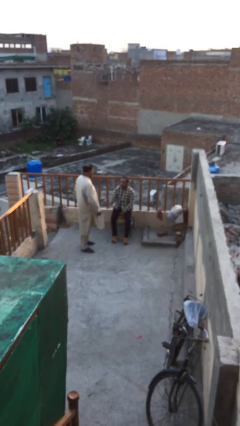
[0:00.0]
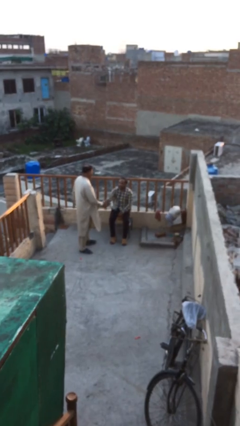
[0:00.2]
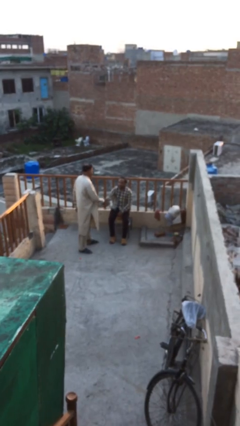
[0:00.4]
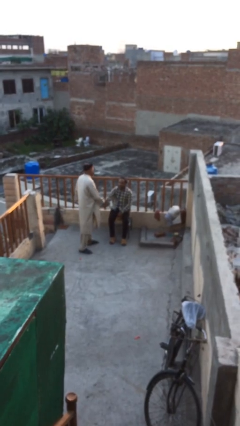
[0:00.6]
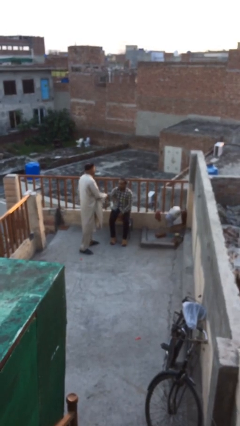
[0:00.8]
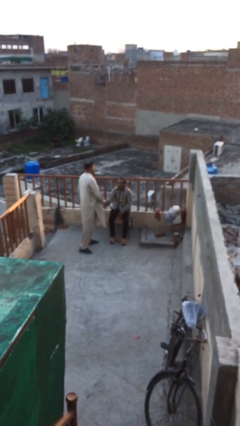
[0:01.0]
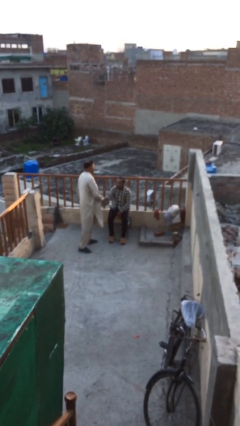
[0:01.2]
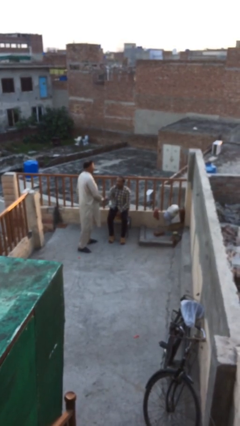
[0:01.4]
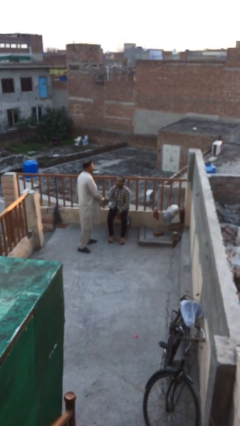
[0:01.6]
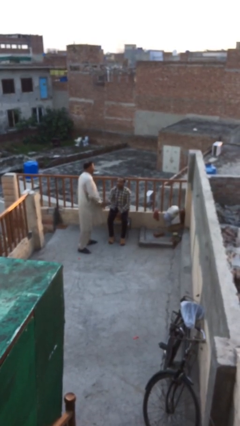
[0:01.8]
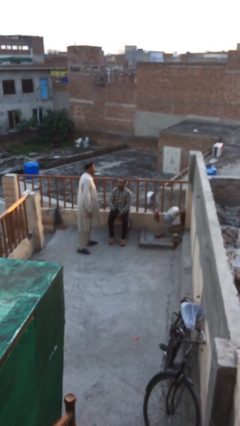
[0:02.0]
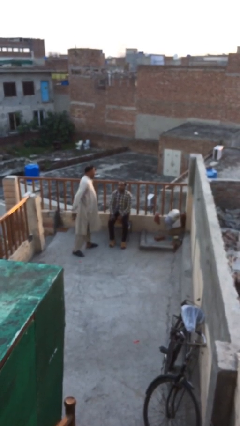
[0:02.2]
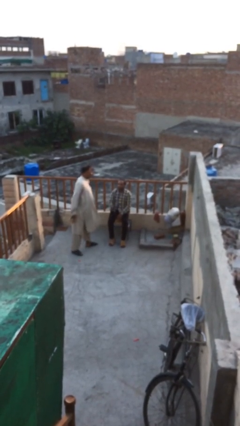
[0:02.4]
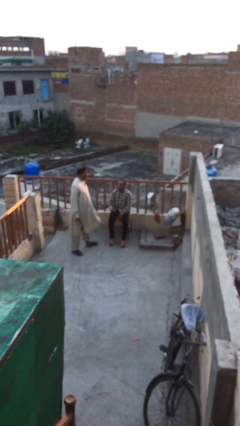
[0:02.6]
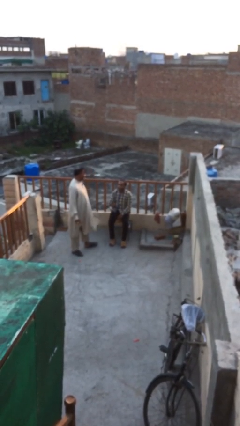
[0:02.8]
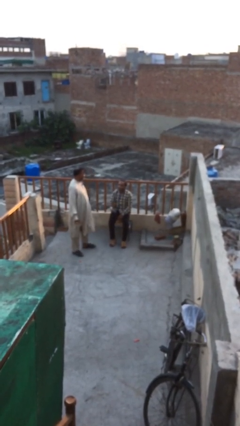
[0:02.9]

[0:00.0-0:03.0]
person shakes hand

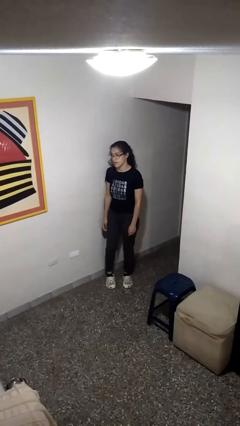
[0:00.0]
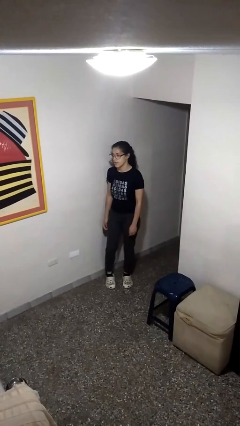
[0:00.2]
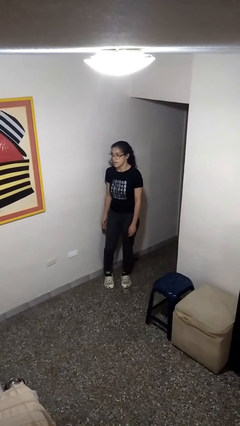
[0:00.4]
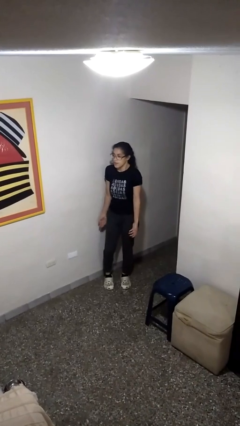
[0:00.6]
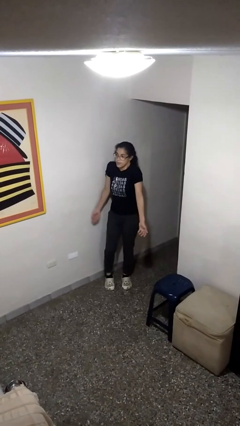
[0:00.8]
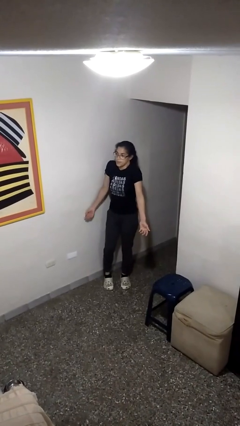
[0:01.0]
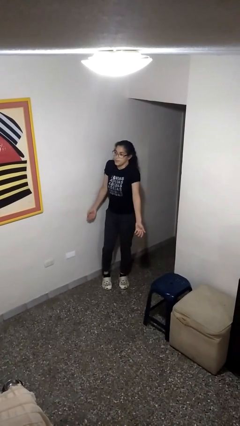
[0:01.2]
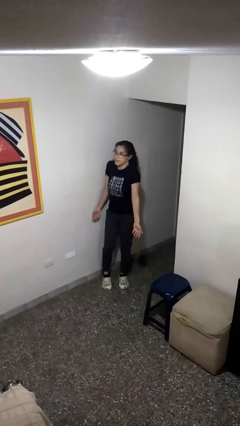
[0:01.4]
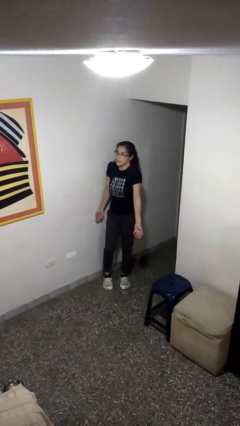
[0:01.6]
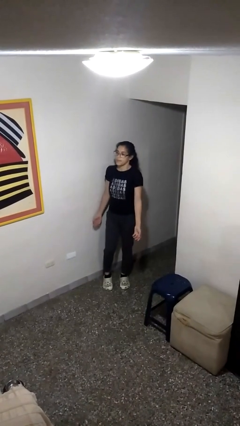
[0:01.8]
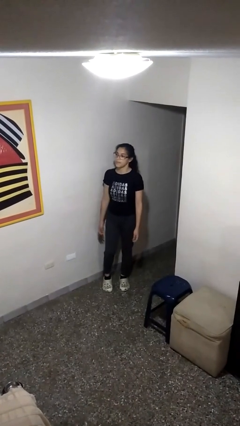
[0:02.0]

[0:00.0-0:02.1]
person shrugs

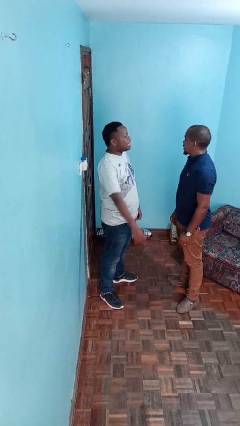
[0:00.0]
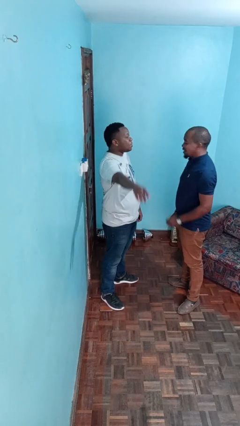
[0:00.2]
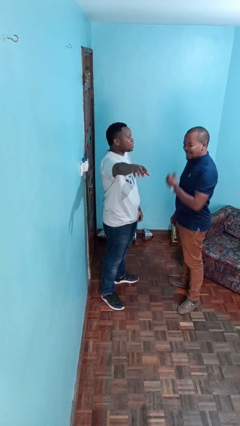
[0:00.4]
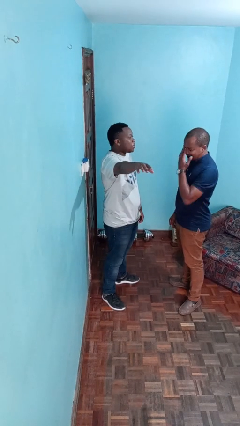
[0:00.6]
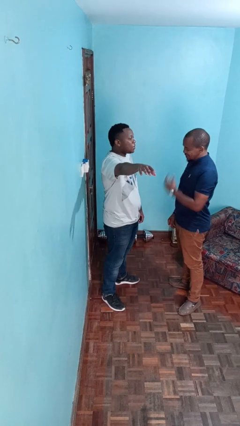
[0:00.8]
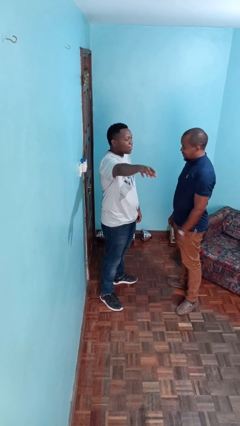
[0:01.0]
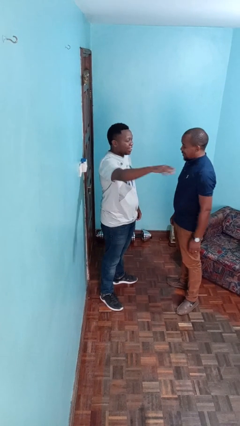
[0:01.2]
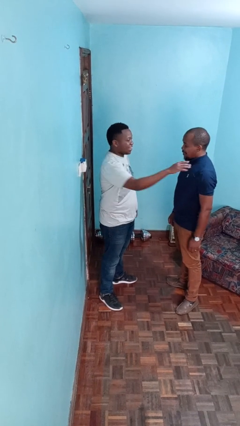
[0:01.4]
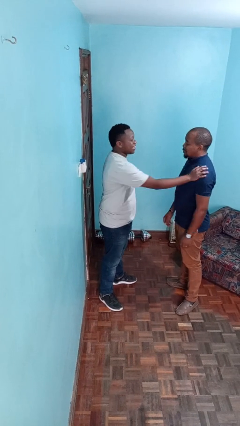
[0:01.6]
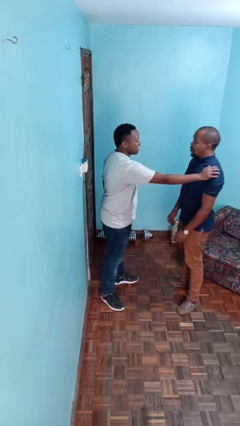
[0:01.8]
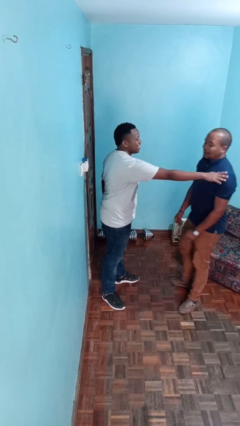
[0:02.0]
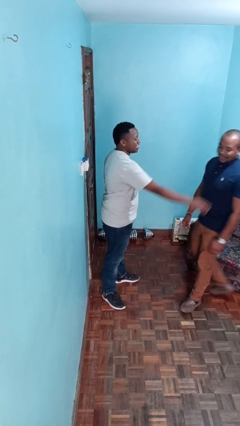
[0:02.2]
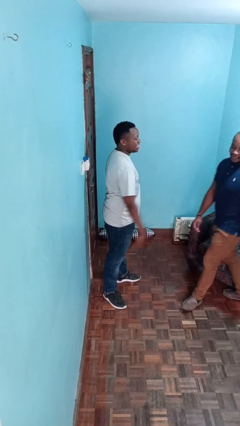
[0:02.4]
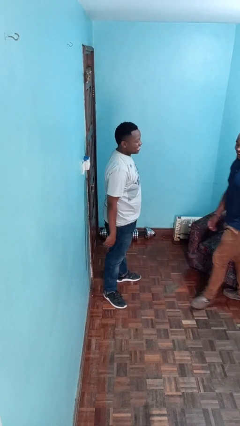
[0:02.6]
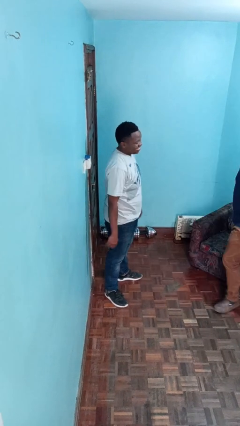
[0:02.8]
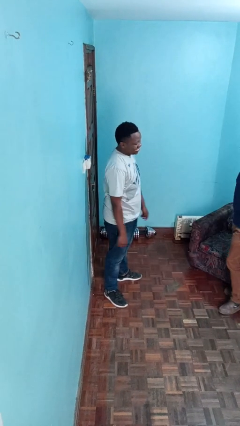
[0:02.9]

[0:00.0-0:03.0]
person shoves person

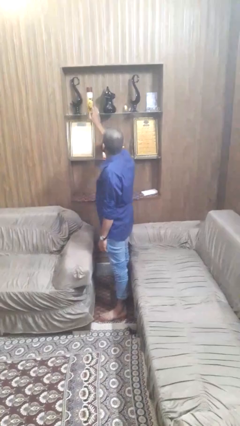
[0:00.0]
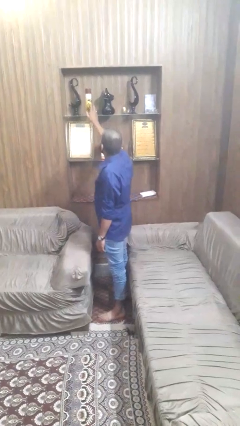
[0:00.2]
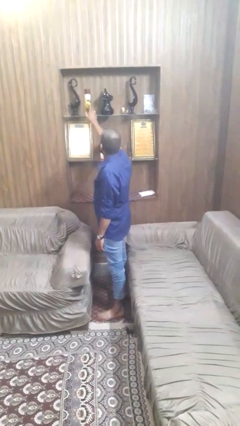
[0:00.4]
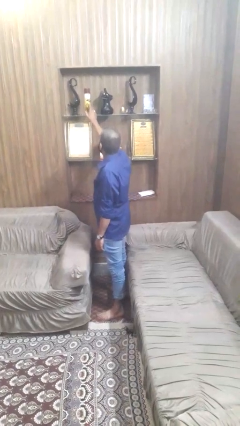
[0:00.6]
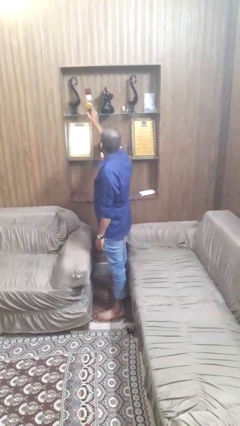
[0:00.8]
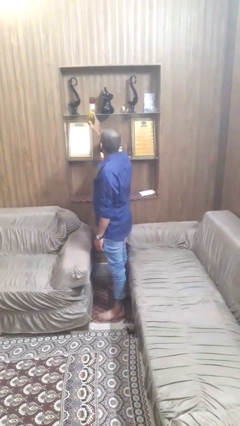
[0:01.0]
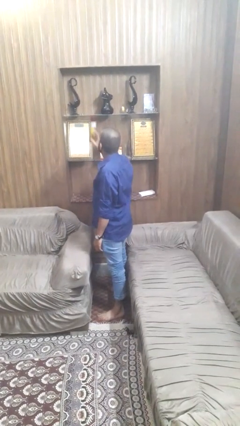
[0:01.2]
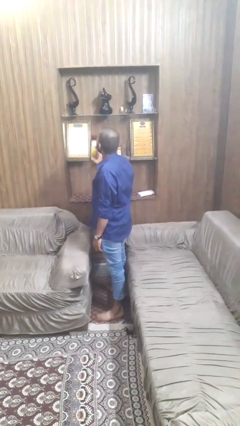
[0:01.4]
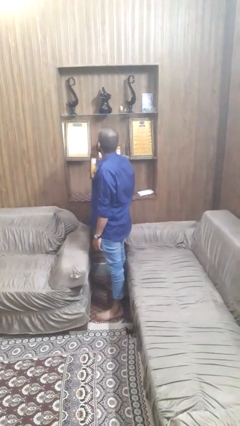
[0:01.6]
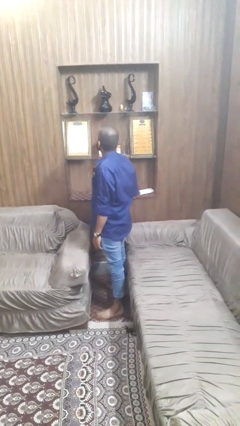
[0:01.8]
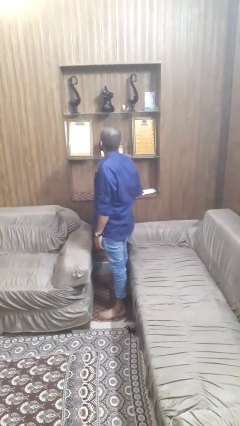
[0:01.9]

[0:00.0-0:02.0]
person picks up object from shelf

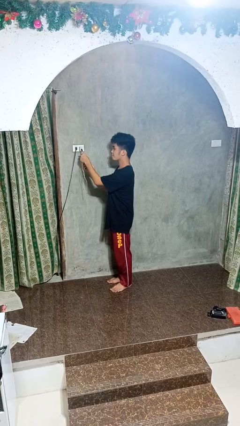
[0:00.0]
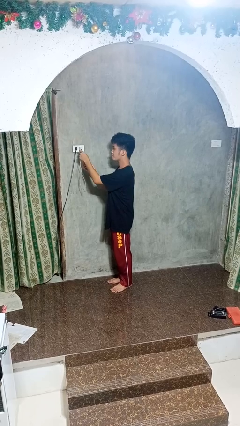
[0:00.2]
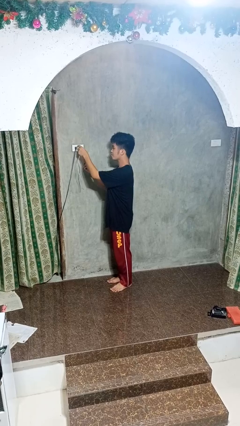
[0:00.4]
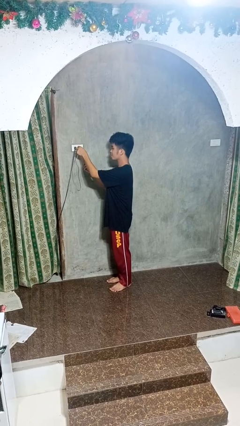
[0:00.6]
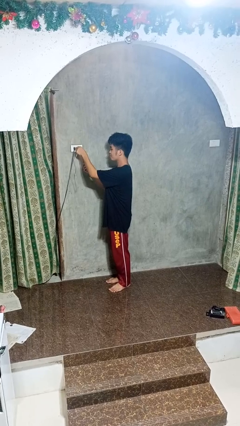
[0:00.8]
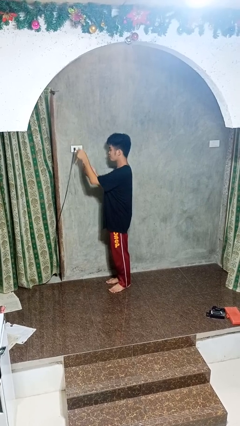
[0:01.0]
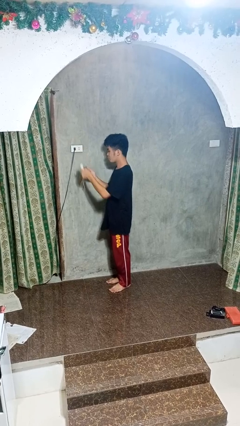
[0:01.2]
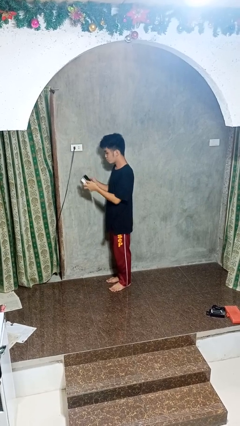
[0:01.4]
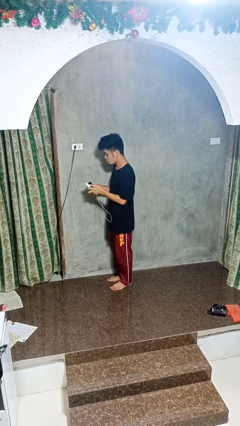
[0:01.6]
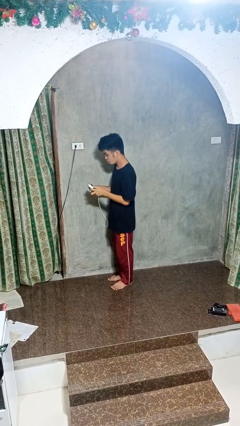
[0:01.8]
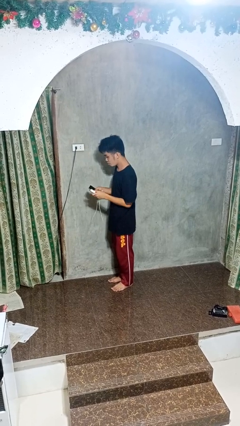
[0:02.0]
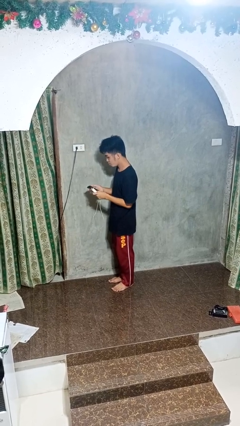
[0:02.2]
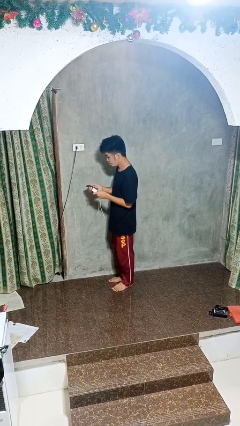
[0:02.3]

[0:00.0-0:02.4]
person unplugs from electrical socket

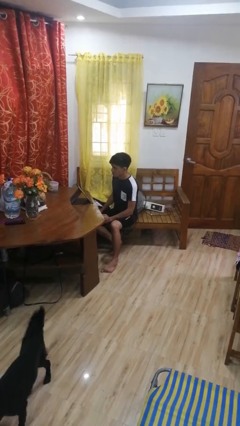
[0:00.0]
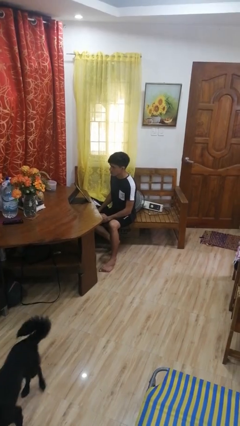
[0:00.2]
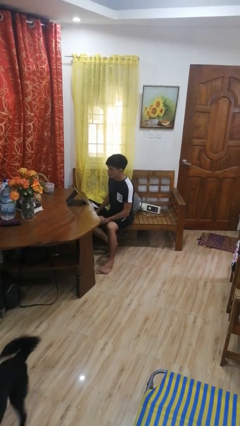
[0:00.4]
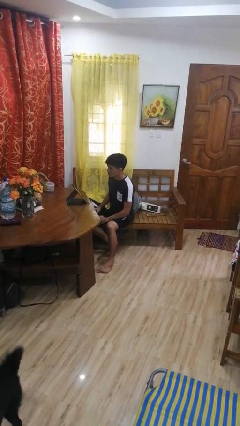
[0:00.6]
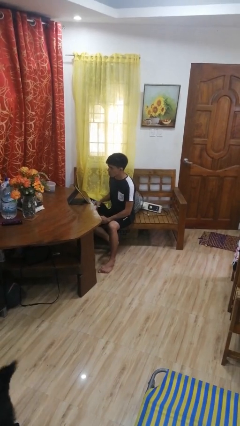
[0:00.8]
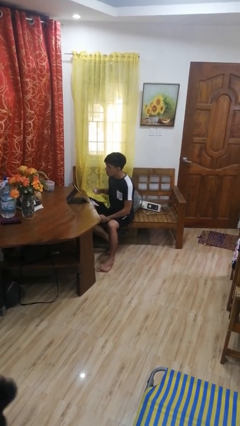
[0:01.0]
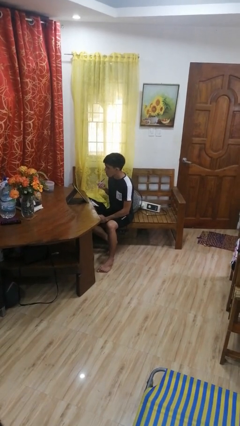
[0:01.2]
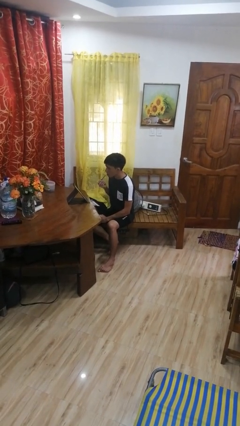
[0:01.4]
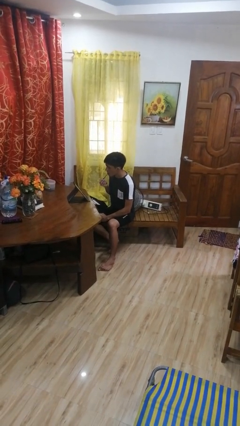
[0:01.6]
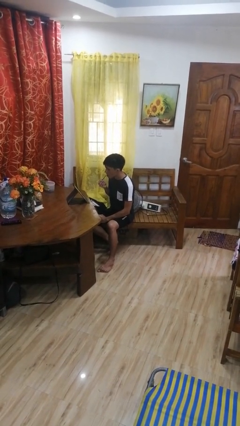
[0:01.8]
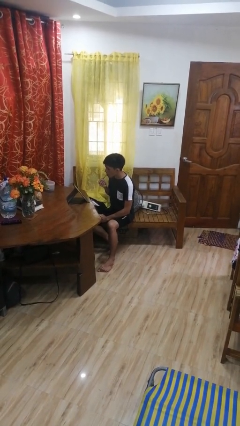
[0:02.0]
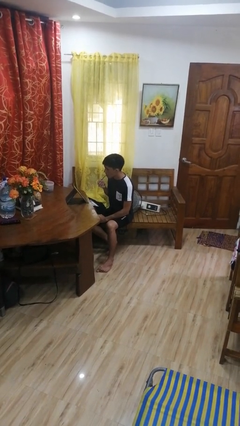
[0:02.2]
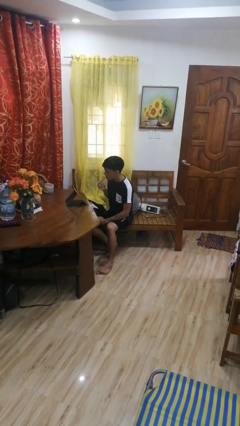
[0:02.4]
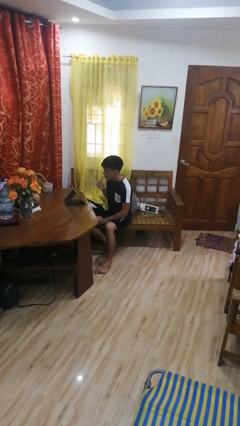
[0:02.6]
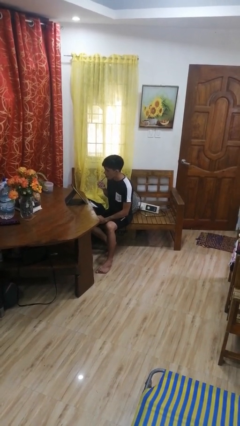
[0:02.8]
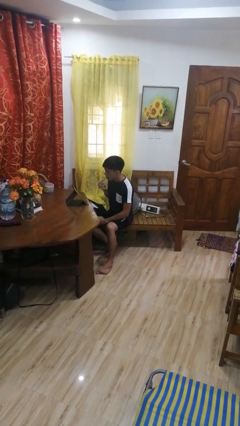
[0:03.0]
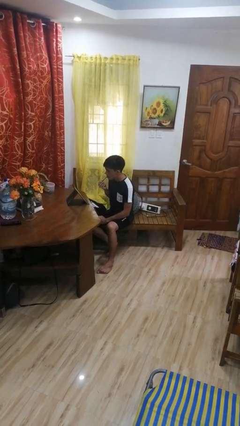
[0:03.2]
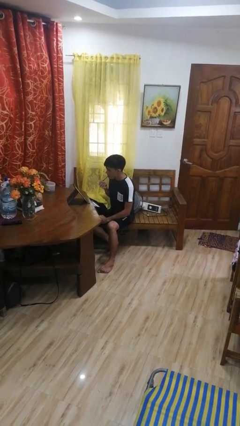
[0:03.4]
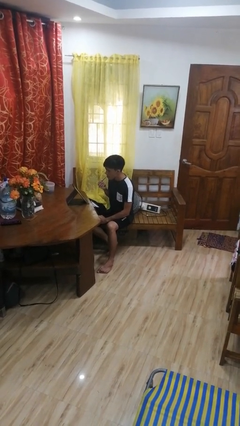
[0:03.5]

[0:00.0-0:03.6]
person applies lip makeup

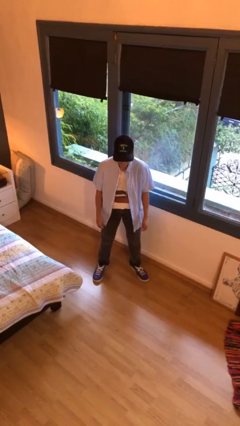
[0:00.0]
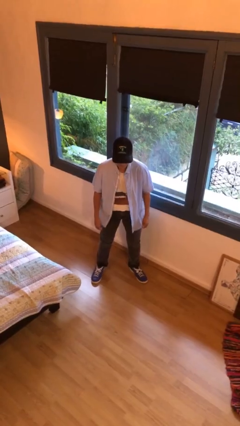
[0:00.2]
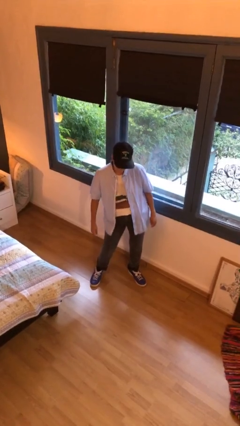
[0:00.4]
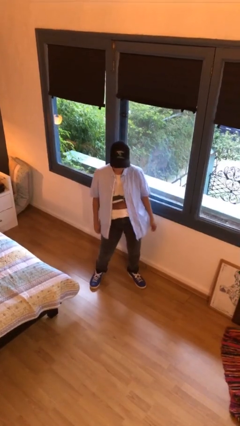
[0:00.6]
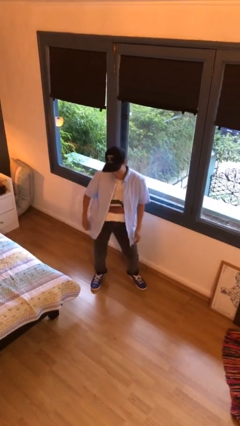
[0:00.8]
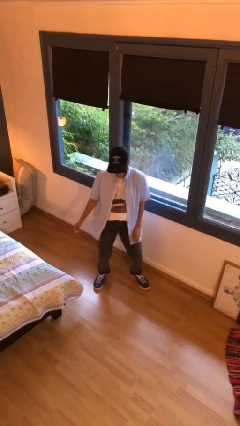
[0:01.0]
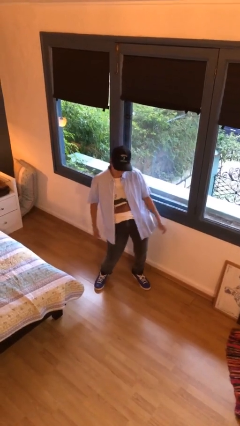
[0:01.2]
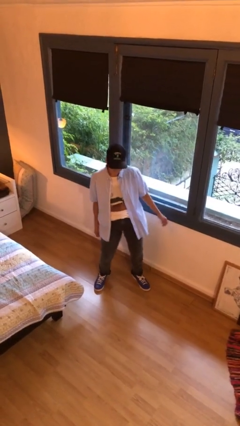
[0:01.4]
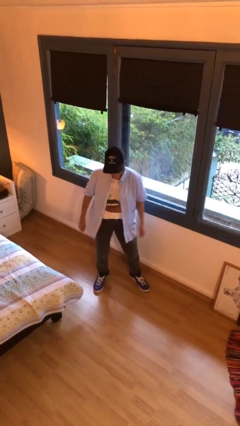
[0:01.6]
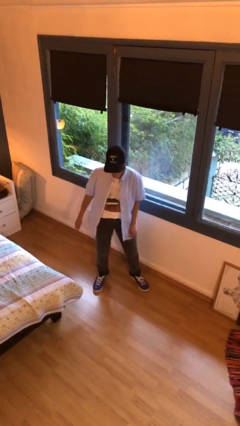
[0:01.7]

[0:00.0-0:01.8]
person wiggles hips
